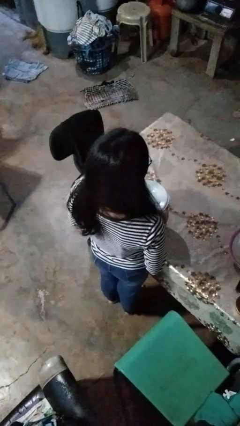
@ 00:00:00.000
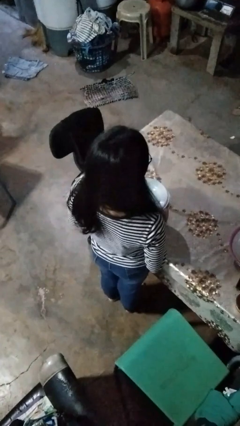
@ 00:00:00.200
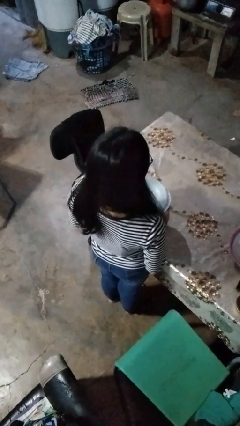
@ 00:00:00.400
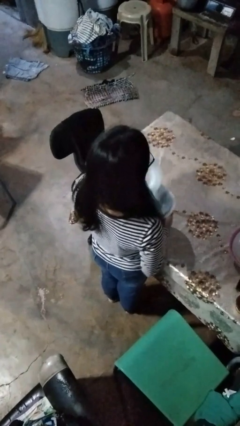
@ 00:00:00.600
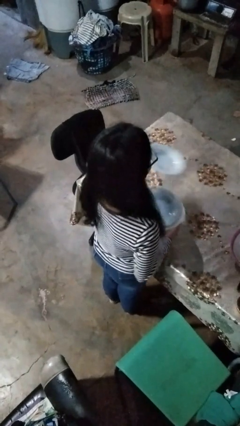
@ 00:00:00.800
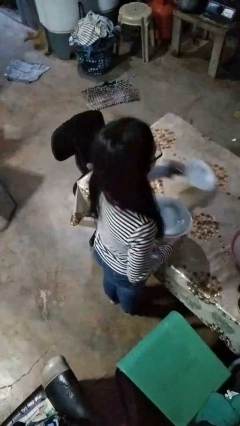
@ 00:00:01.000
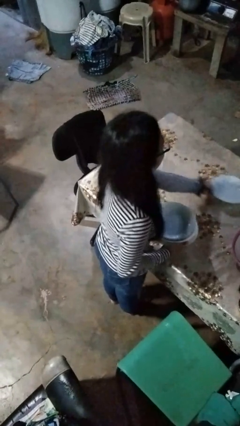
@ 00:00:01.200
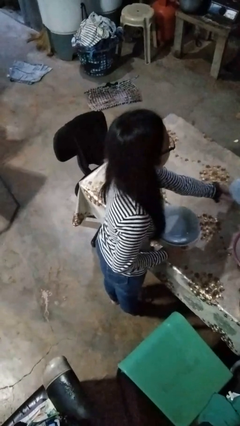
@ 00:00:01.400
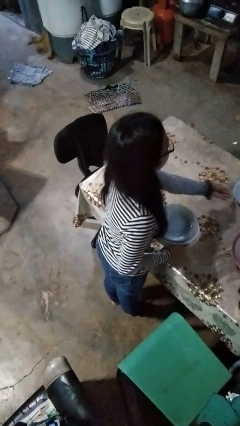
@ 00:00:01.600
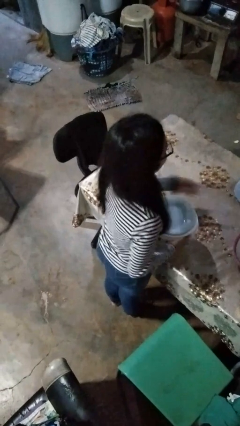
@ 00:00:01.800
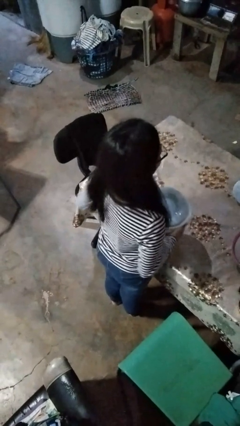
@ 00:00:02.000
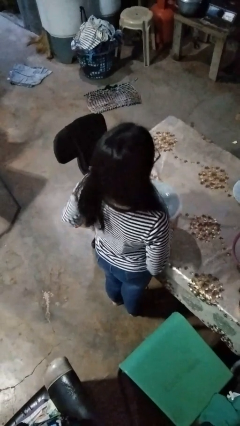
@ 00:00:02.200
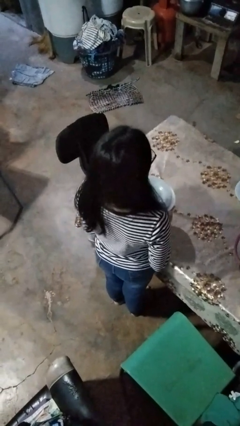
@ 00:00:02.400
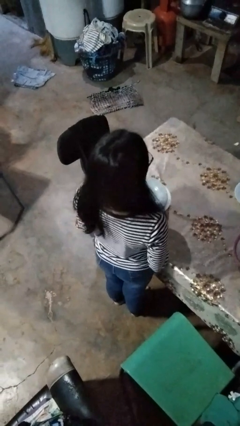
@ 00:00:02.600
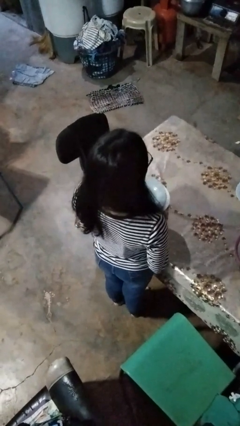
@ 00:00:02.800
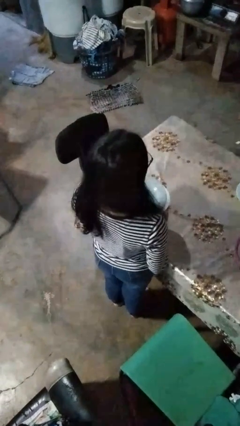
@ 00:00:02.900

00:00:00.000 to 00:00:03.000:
person sets table

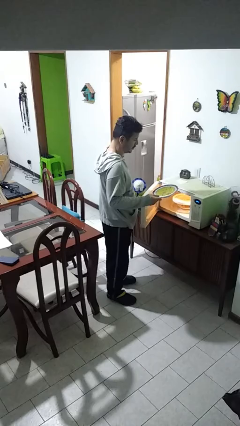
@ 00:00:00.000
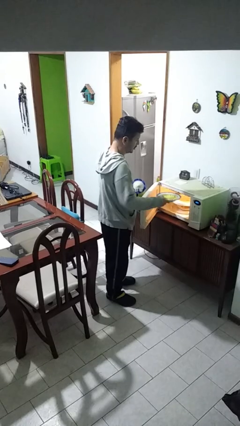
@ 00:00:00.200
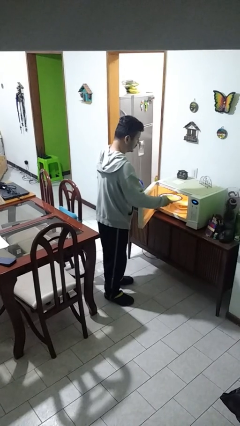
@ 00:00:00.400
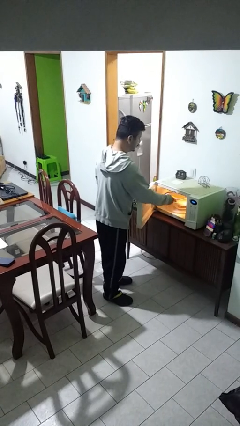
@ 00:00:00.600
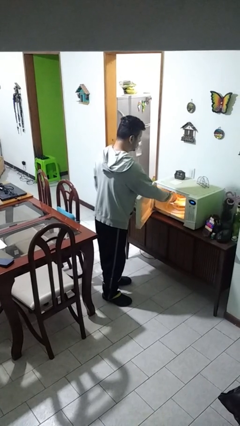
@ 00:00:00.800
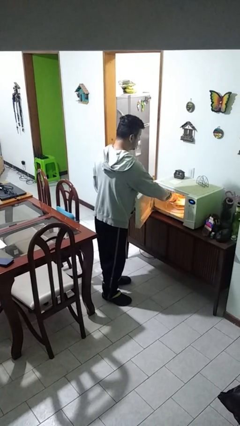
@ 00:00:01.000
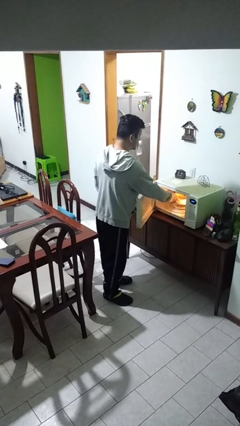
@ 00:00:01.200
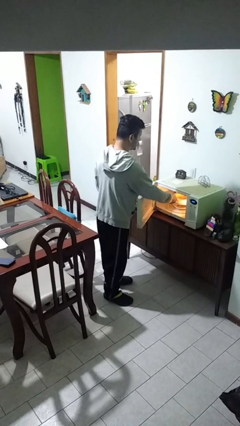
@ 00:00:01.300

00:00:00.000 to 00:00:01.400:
person puts object into microwave

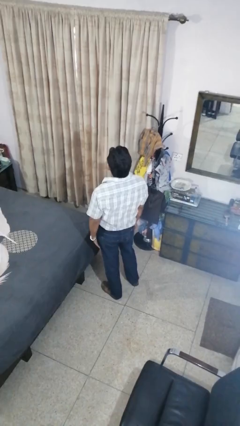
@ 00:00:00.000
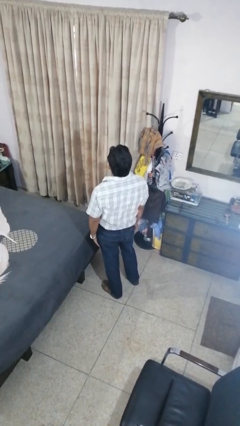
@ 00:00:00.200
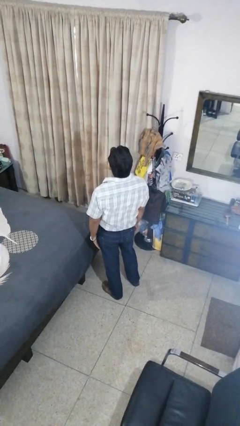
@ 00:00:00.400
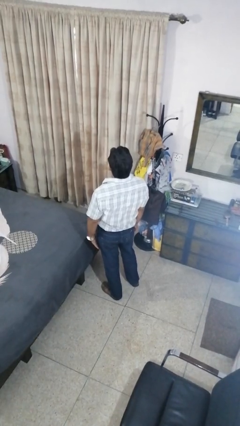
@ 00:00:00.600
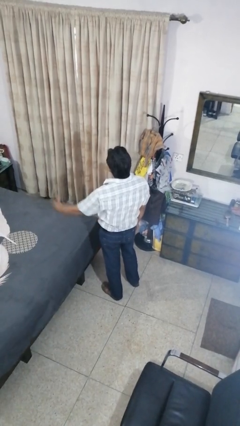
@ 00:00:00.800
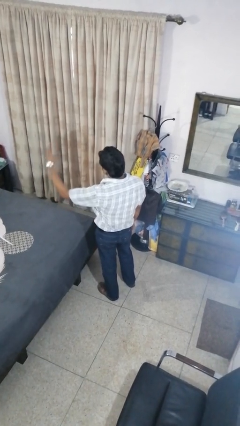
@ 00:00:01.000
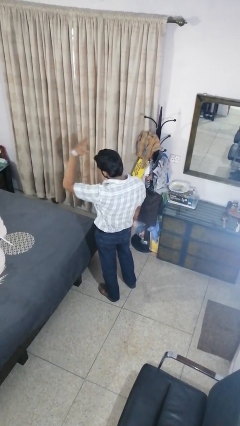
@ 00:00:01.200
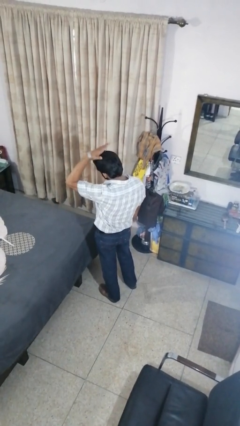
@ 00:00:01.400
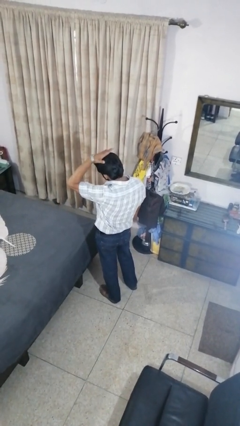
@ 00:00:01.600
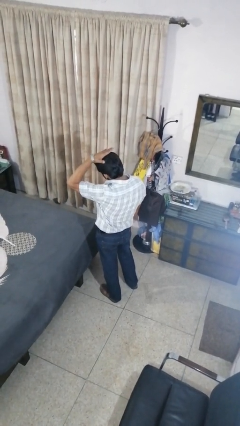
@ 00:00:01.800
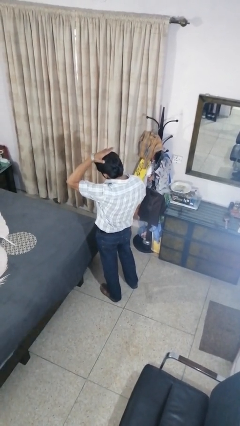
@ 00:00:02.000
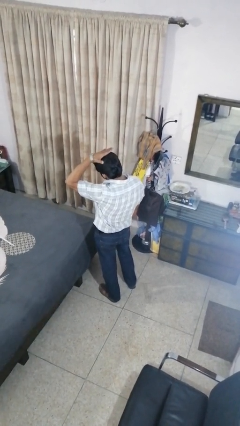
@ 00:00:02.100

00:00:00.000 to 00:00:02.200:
person pats head

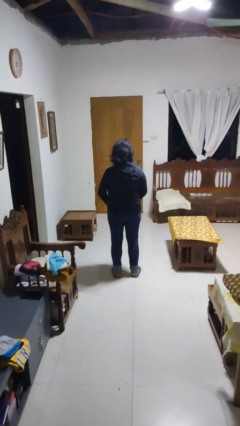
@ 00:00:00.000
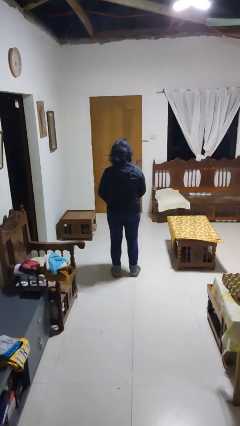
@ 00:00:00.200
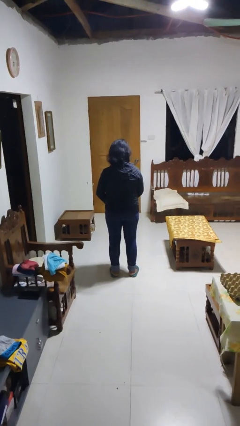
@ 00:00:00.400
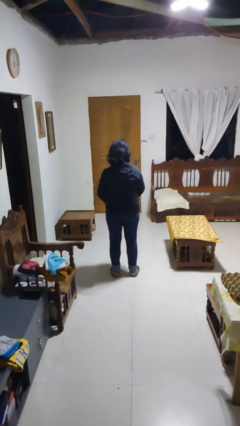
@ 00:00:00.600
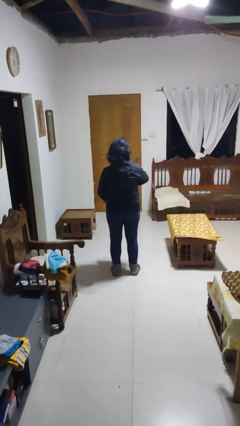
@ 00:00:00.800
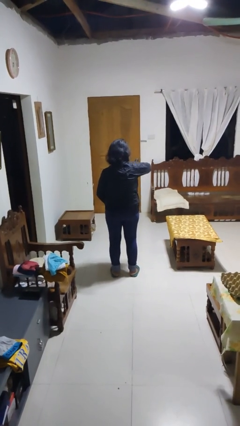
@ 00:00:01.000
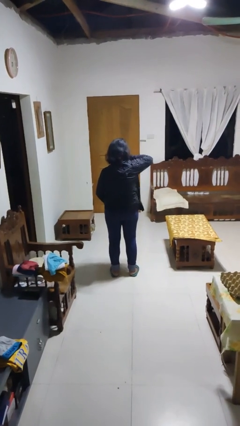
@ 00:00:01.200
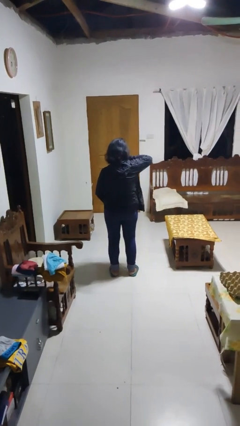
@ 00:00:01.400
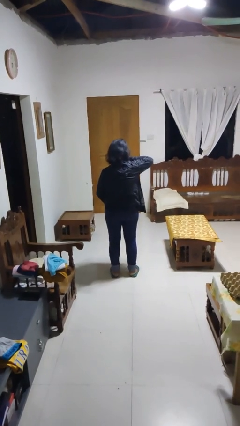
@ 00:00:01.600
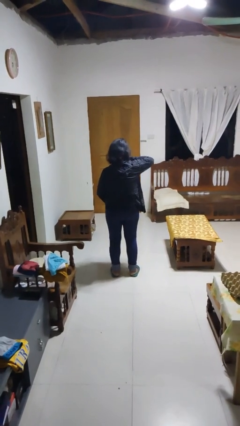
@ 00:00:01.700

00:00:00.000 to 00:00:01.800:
person zips up jacket

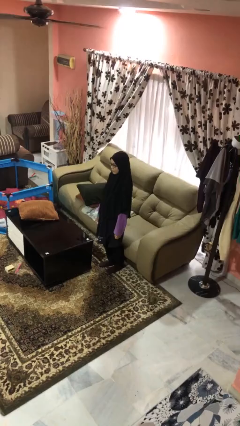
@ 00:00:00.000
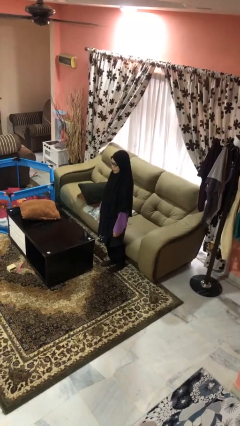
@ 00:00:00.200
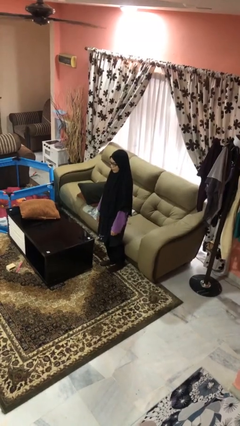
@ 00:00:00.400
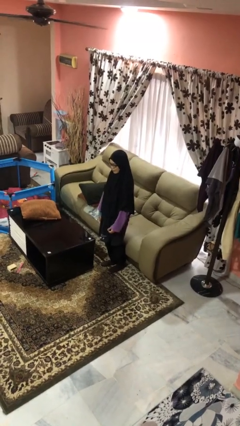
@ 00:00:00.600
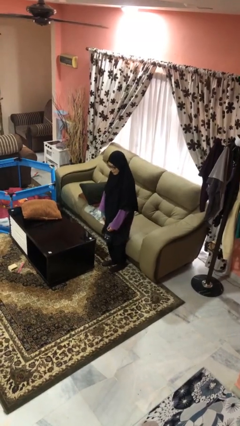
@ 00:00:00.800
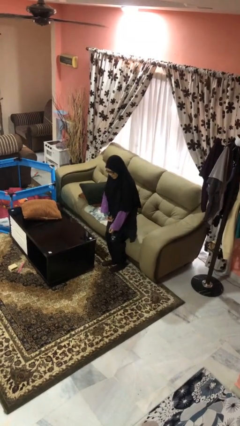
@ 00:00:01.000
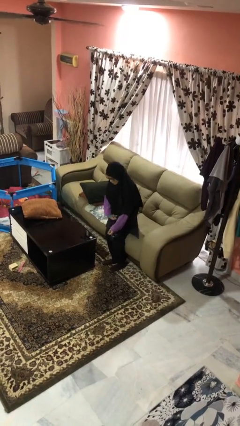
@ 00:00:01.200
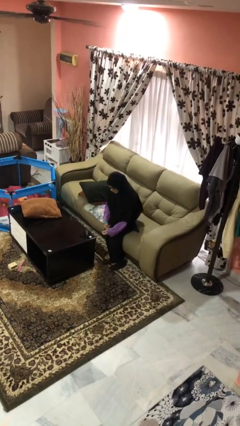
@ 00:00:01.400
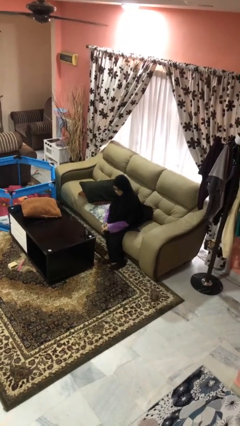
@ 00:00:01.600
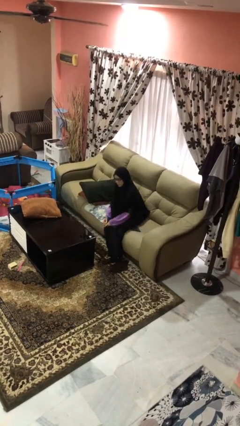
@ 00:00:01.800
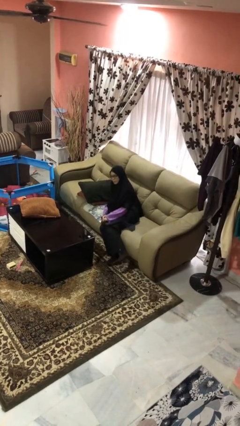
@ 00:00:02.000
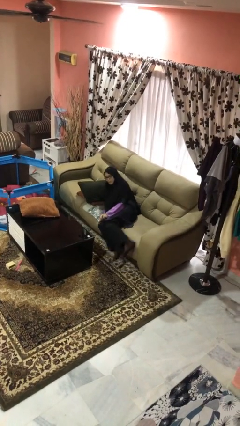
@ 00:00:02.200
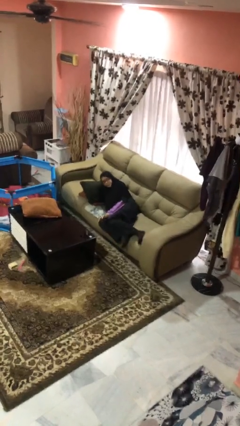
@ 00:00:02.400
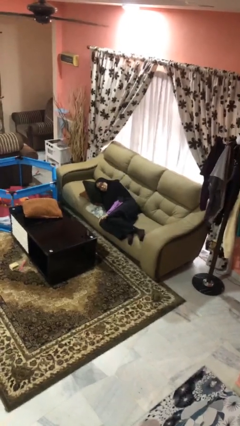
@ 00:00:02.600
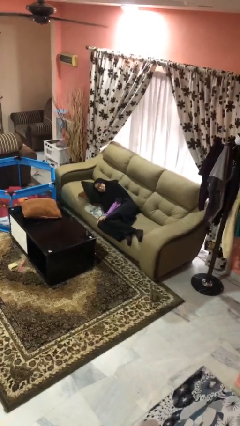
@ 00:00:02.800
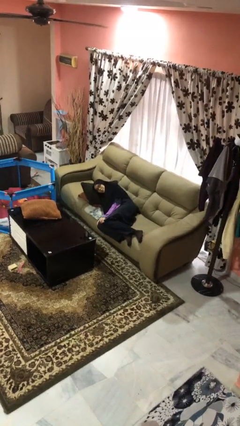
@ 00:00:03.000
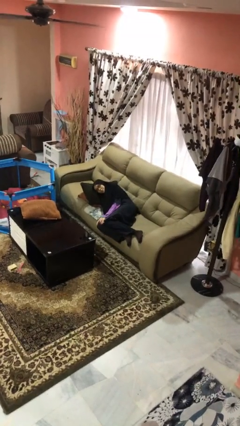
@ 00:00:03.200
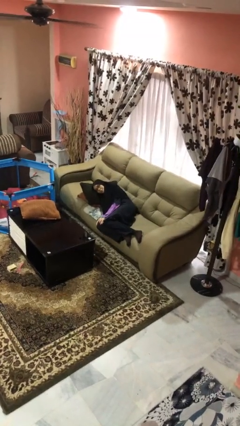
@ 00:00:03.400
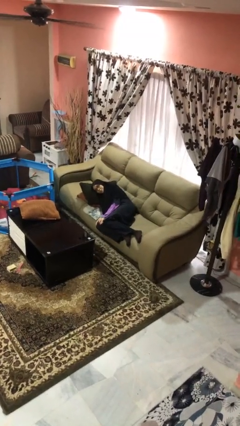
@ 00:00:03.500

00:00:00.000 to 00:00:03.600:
person lies down on couch

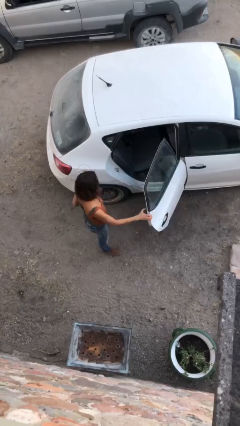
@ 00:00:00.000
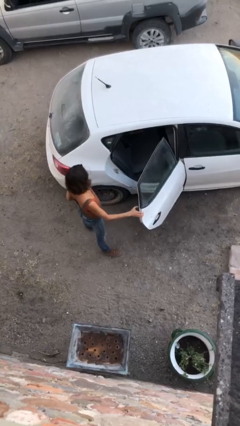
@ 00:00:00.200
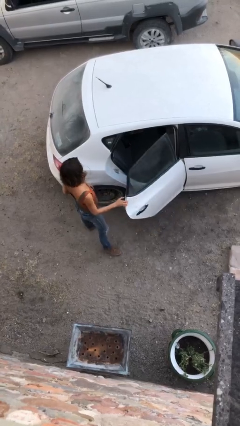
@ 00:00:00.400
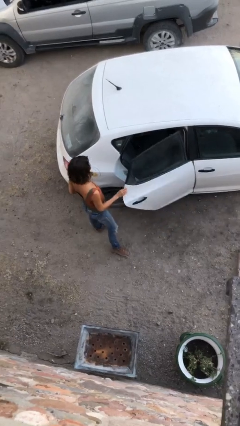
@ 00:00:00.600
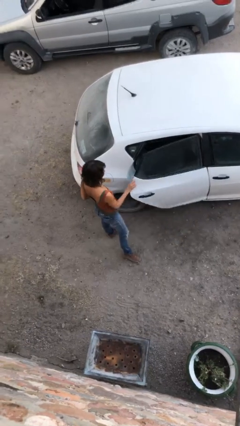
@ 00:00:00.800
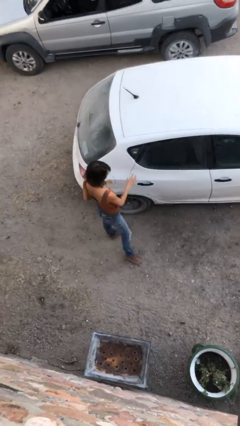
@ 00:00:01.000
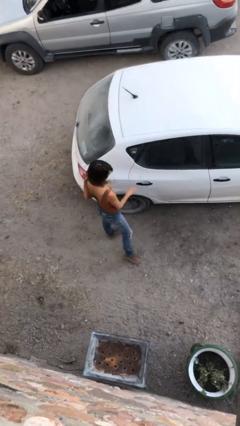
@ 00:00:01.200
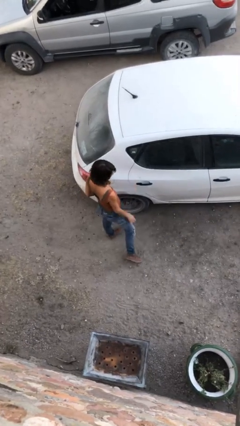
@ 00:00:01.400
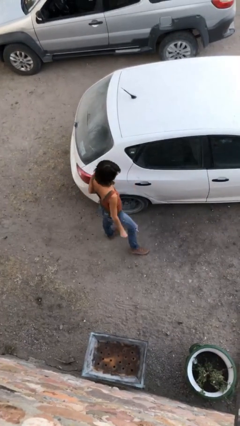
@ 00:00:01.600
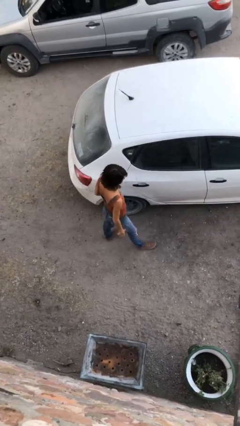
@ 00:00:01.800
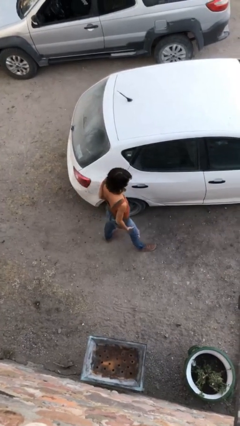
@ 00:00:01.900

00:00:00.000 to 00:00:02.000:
person closes car door

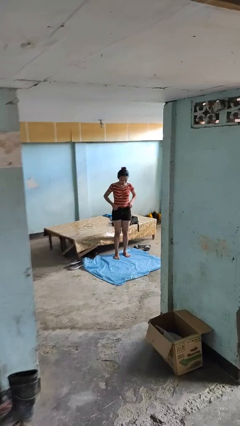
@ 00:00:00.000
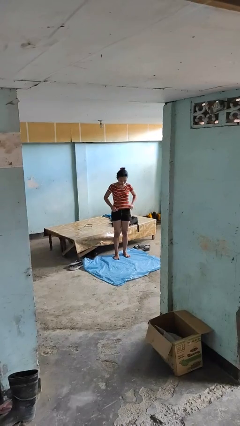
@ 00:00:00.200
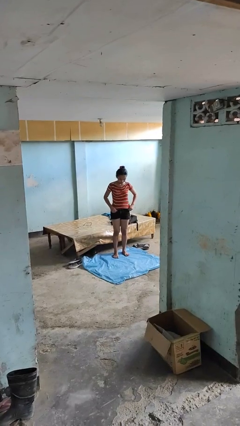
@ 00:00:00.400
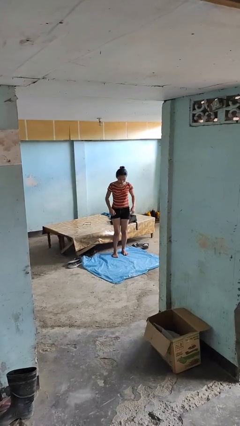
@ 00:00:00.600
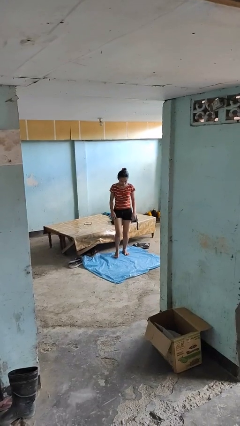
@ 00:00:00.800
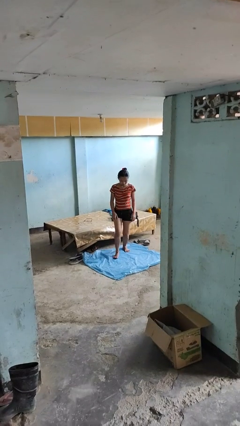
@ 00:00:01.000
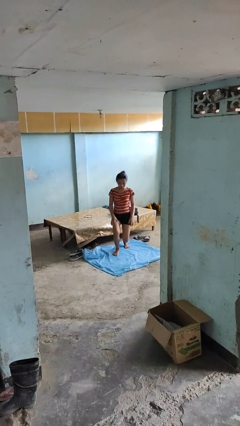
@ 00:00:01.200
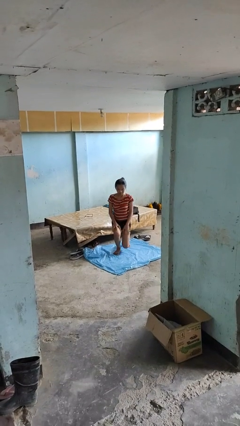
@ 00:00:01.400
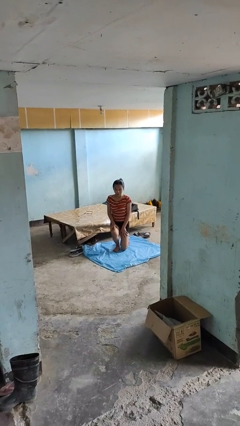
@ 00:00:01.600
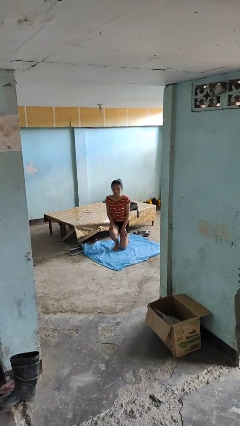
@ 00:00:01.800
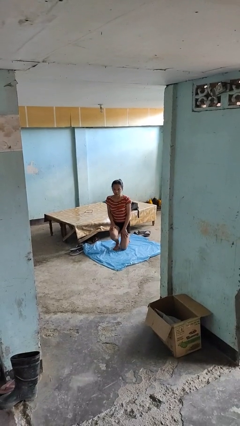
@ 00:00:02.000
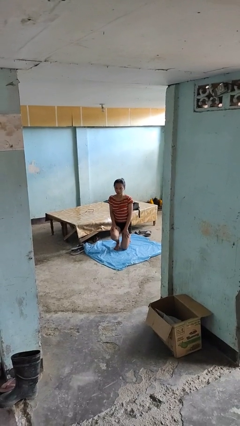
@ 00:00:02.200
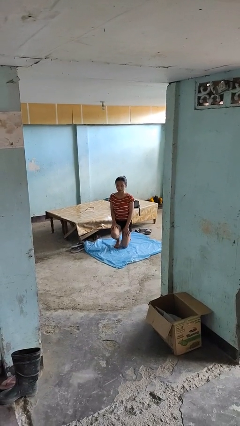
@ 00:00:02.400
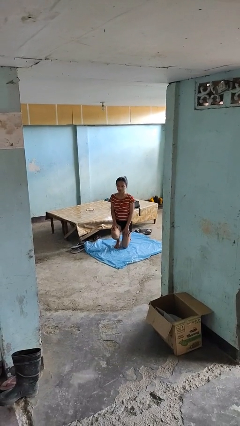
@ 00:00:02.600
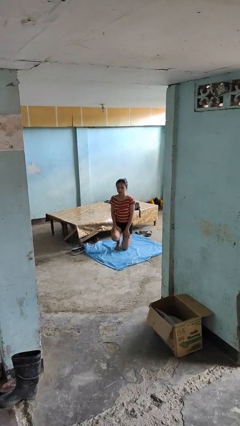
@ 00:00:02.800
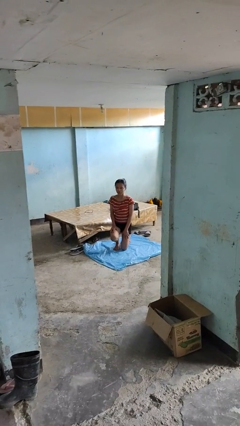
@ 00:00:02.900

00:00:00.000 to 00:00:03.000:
person kneels
